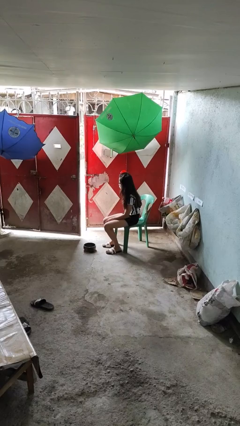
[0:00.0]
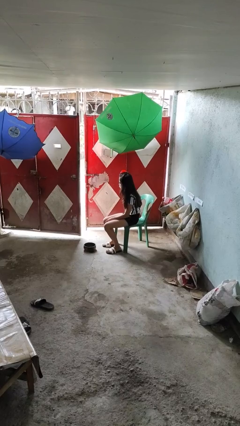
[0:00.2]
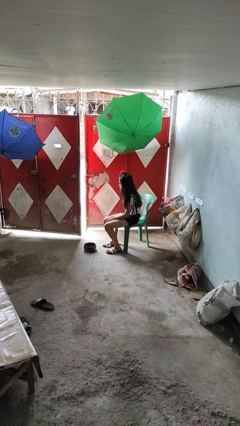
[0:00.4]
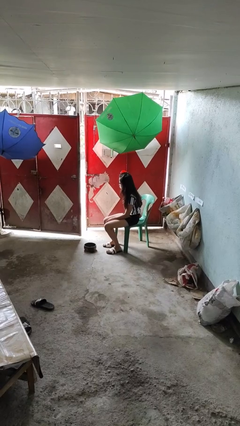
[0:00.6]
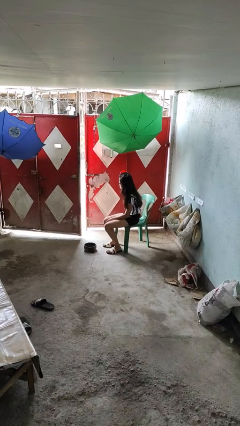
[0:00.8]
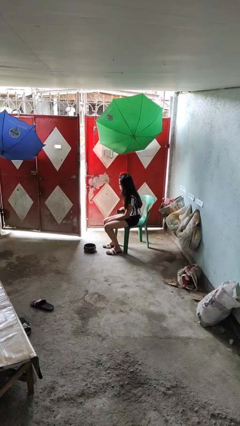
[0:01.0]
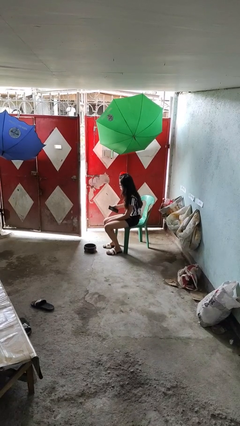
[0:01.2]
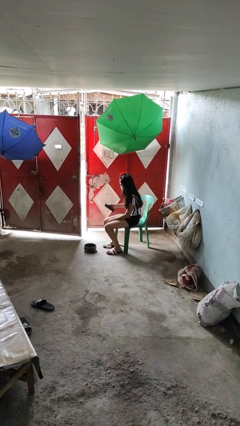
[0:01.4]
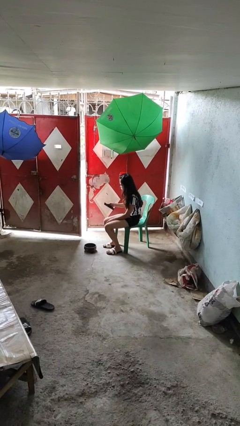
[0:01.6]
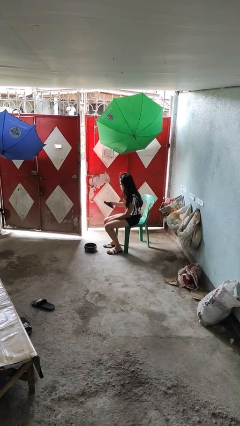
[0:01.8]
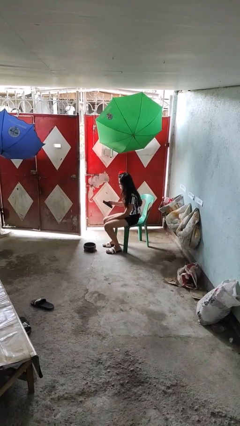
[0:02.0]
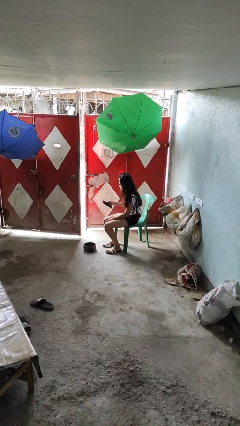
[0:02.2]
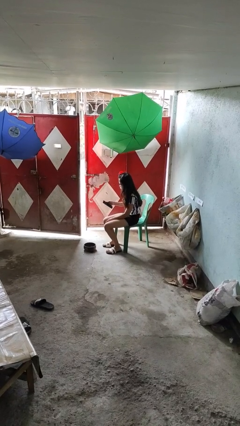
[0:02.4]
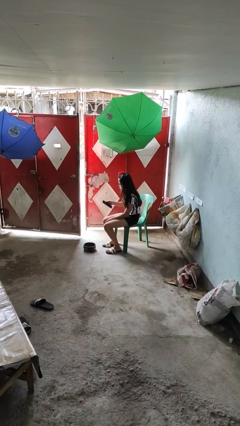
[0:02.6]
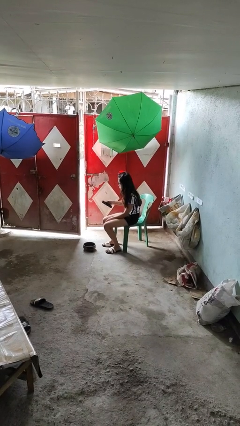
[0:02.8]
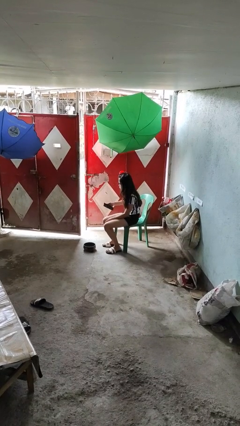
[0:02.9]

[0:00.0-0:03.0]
person takes phone from pocket

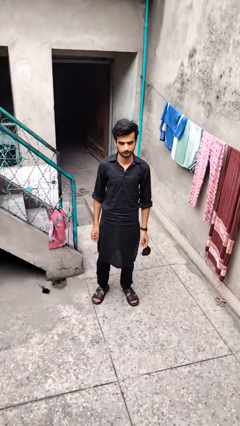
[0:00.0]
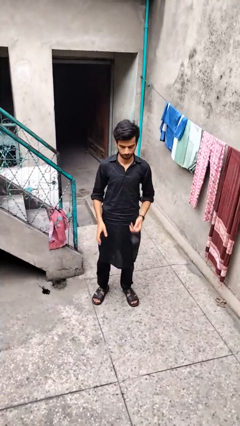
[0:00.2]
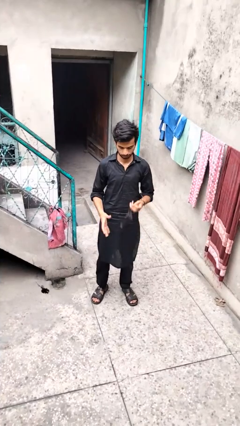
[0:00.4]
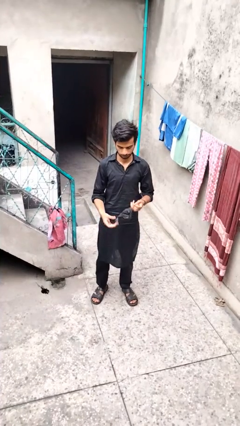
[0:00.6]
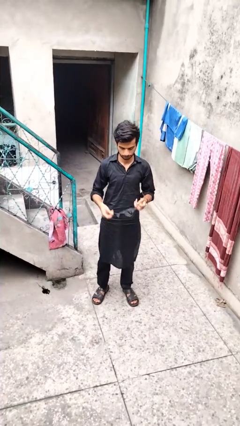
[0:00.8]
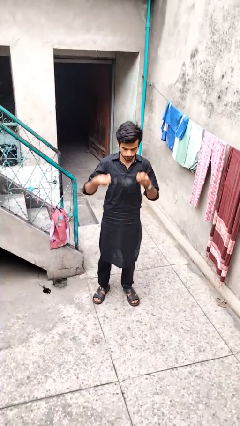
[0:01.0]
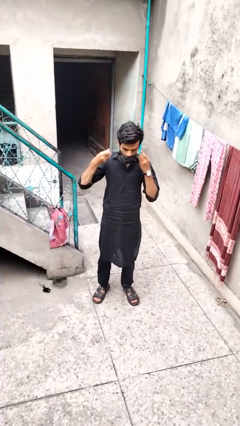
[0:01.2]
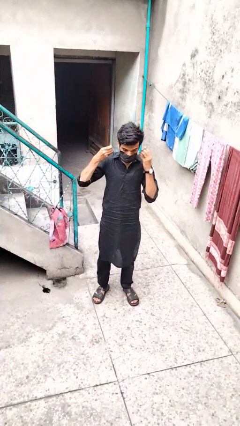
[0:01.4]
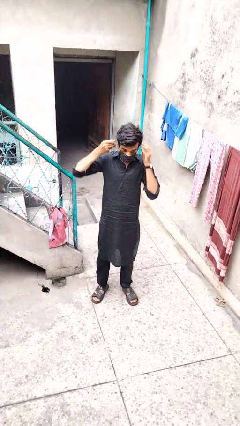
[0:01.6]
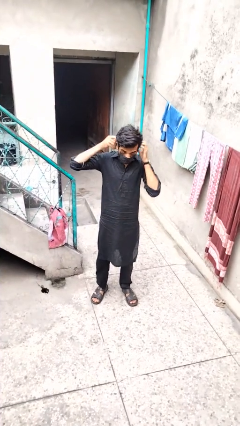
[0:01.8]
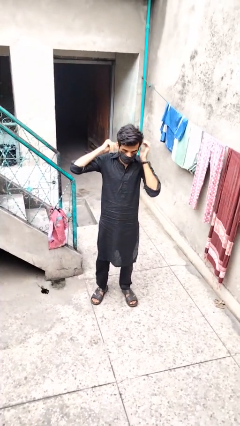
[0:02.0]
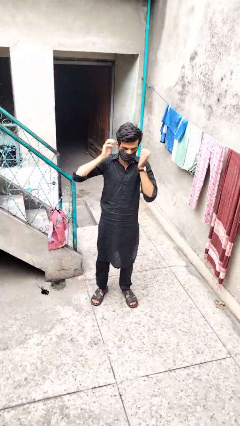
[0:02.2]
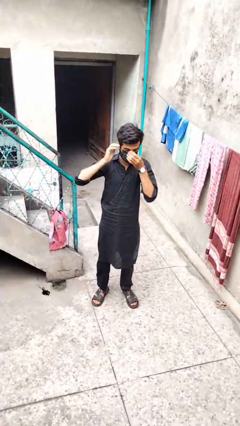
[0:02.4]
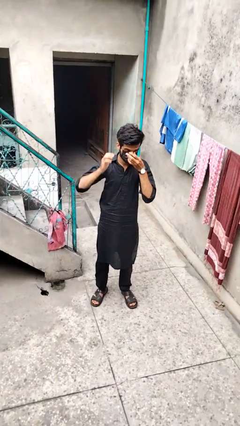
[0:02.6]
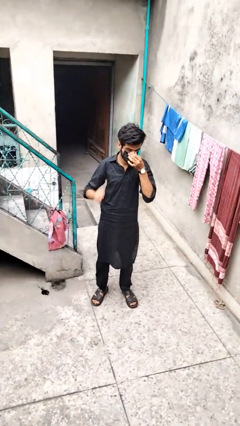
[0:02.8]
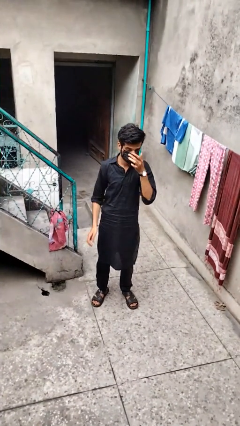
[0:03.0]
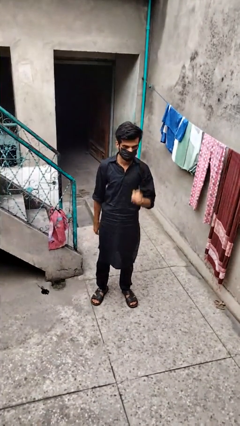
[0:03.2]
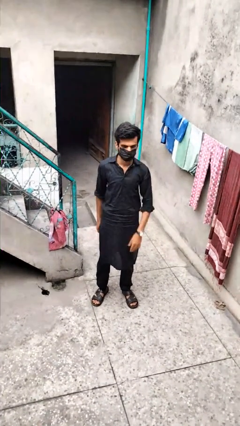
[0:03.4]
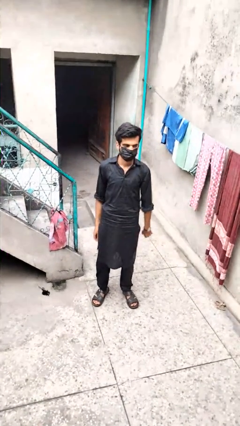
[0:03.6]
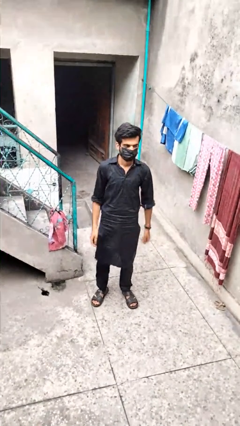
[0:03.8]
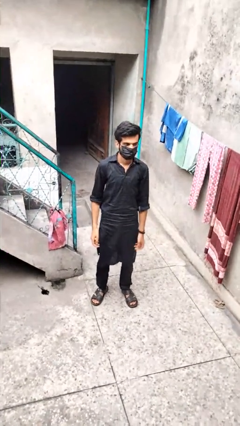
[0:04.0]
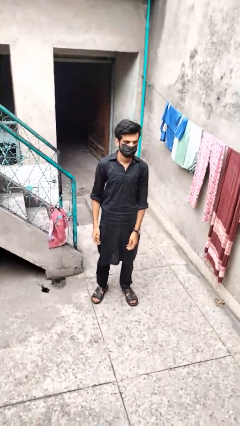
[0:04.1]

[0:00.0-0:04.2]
person puts on facemask

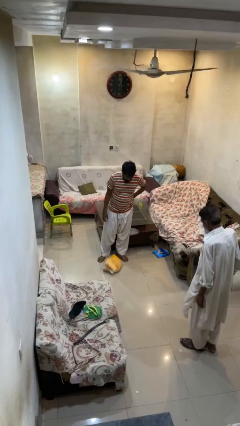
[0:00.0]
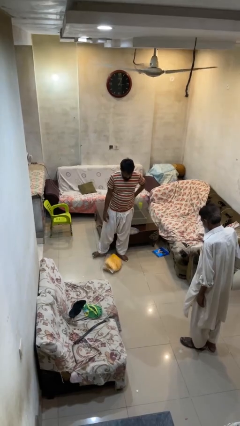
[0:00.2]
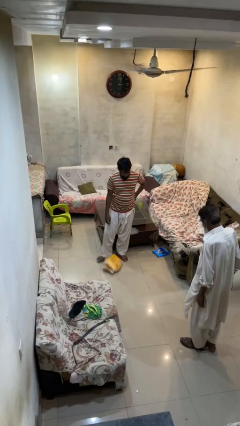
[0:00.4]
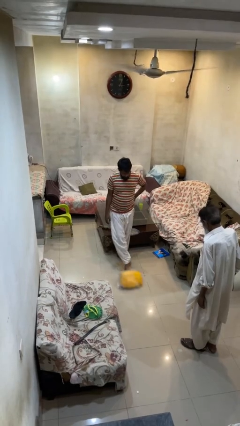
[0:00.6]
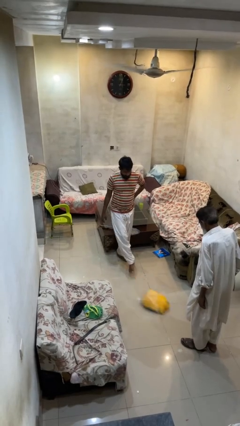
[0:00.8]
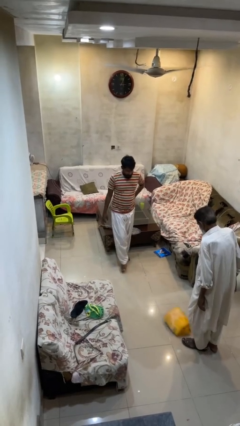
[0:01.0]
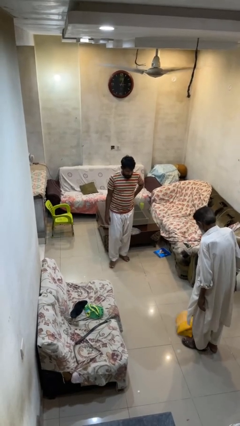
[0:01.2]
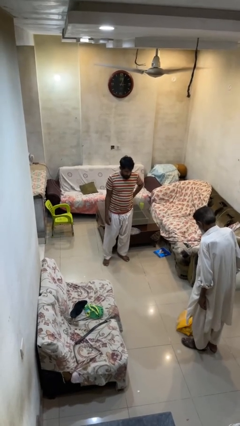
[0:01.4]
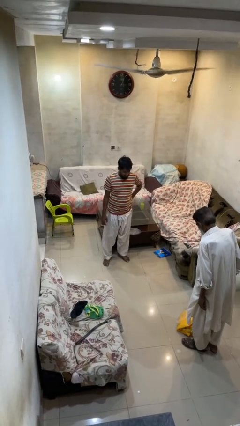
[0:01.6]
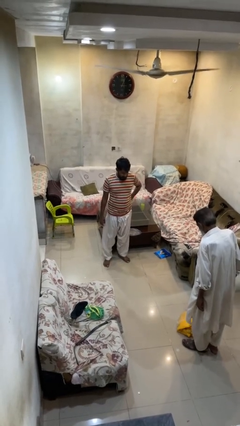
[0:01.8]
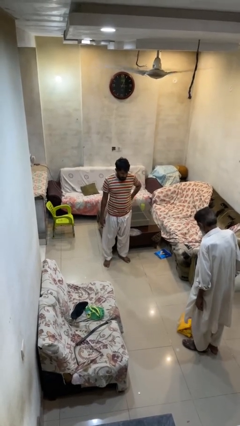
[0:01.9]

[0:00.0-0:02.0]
person kicks object to person

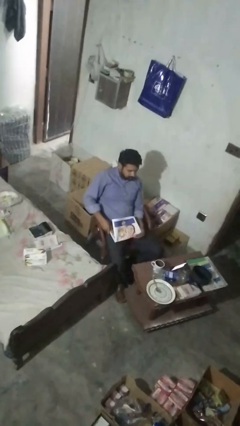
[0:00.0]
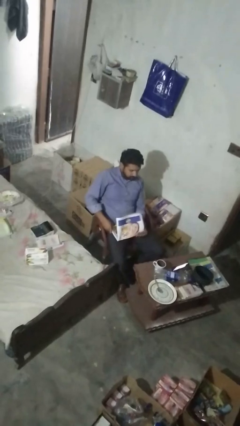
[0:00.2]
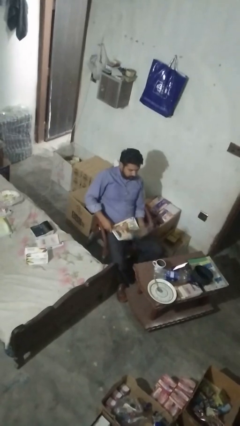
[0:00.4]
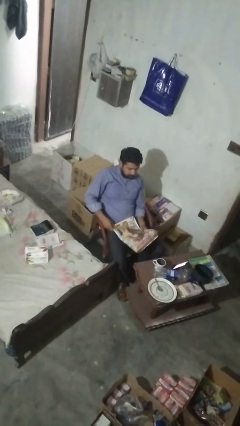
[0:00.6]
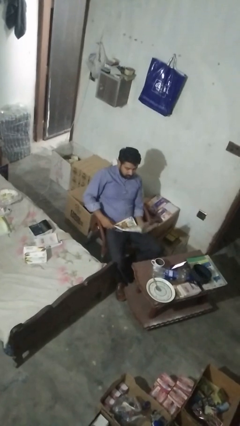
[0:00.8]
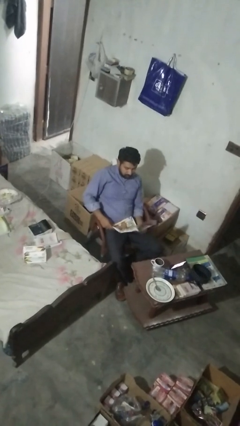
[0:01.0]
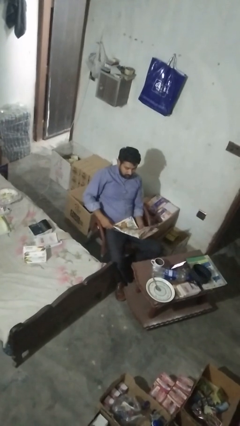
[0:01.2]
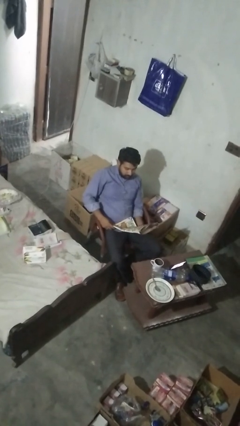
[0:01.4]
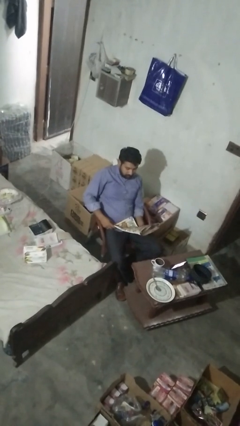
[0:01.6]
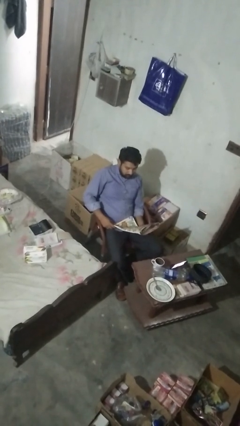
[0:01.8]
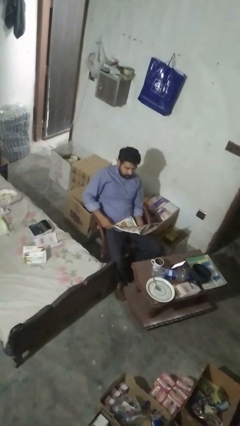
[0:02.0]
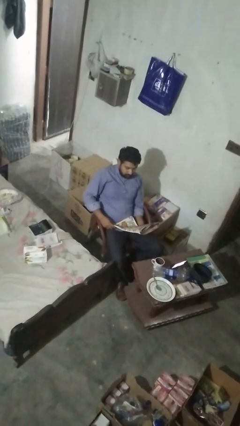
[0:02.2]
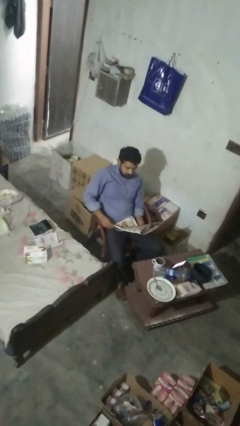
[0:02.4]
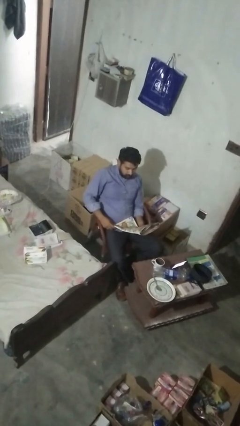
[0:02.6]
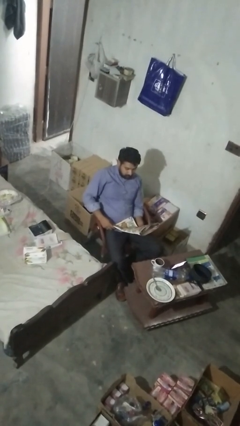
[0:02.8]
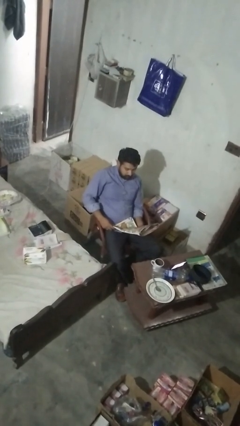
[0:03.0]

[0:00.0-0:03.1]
person reads magazine

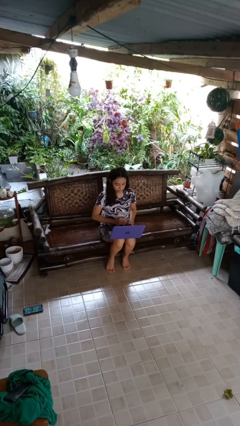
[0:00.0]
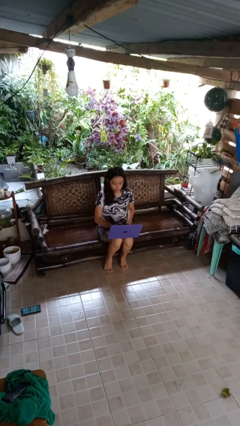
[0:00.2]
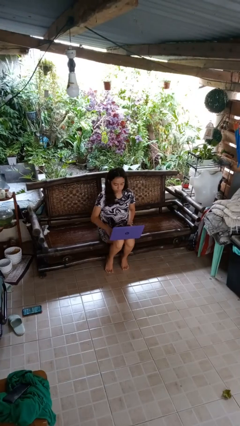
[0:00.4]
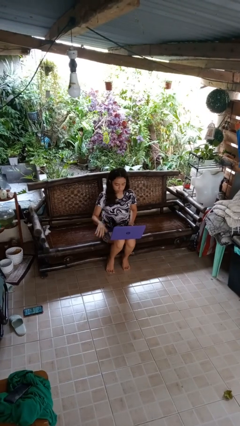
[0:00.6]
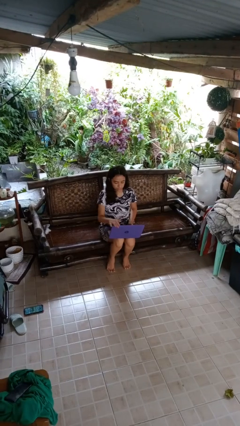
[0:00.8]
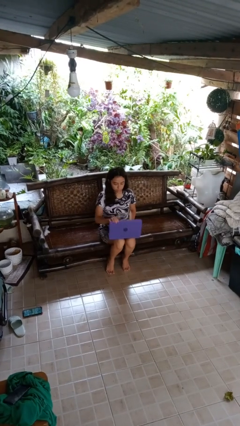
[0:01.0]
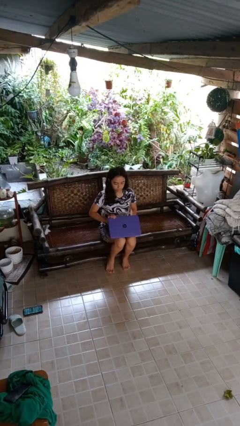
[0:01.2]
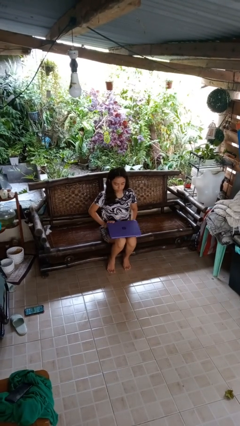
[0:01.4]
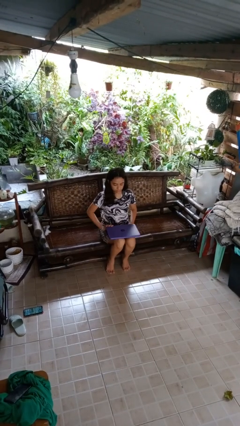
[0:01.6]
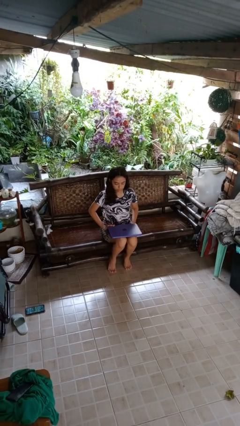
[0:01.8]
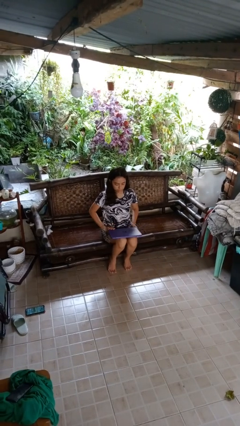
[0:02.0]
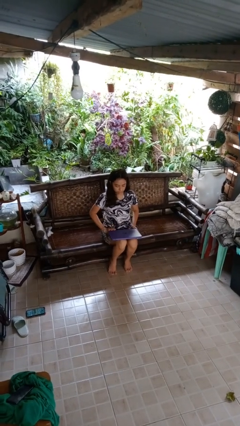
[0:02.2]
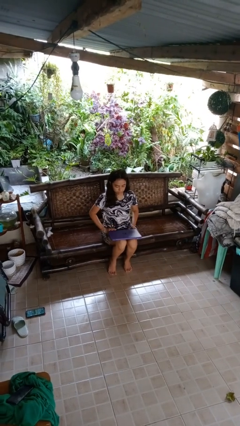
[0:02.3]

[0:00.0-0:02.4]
person closes laptop

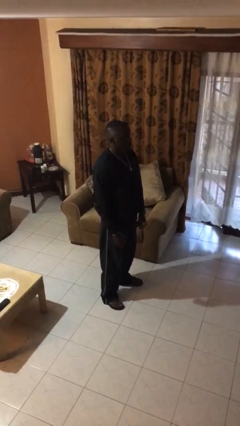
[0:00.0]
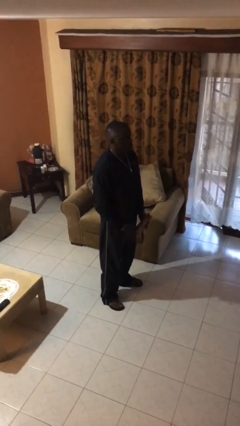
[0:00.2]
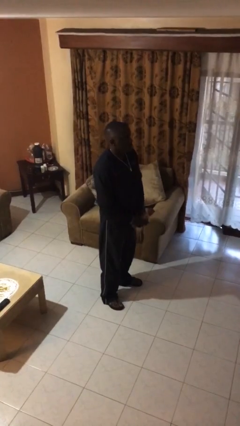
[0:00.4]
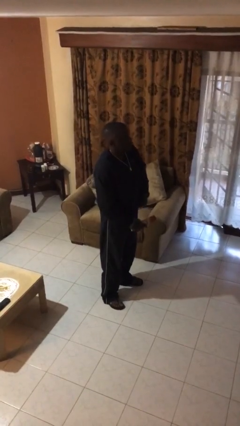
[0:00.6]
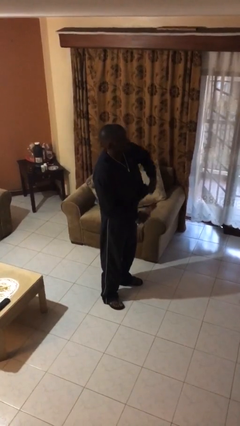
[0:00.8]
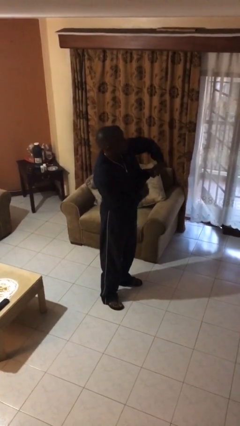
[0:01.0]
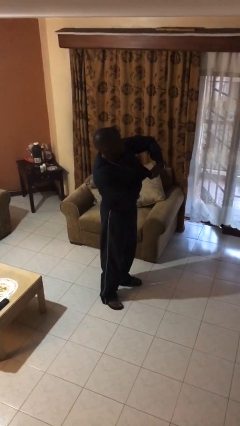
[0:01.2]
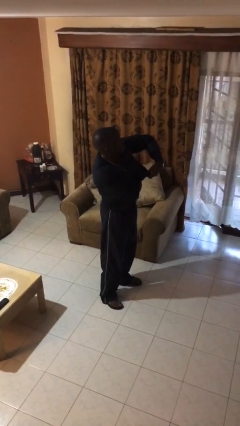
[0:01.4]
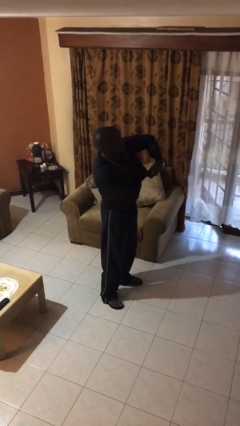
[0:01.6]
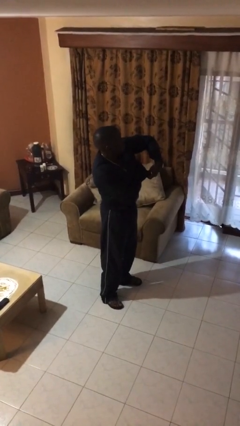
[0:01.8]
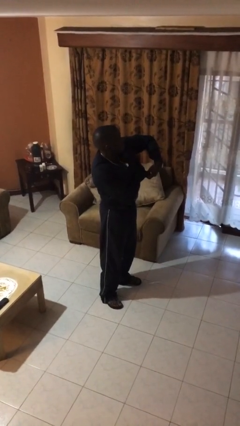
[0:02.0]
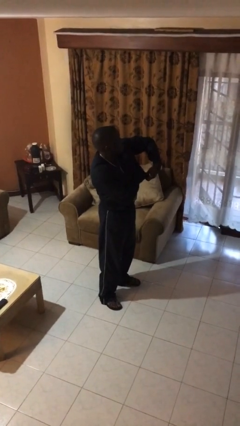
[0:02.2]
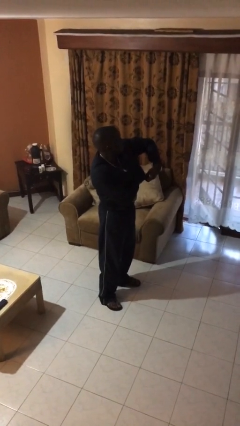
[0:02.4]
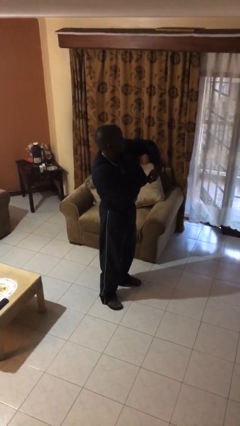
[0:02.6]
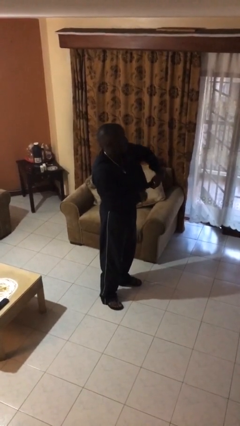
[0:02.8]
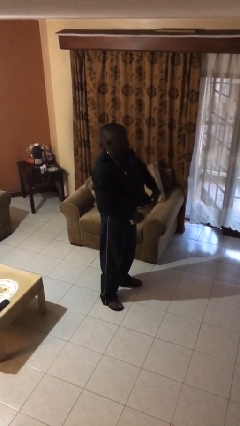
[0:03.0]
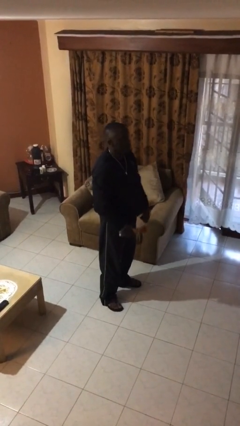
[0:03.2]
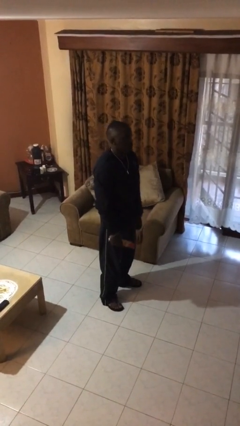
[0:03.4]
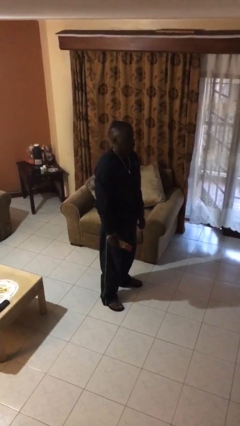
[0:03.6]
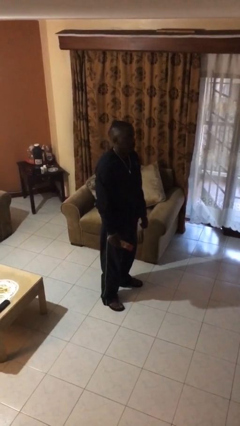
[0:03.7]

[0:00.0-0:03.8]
person applies deodorant
